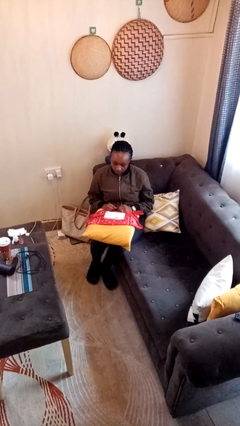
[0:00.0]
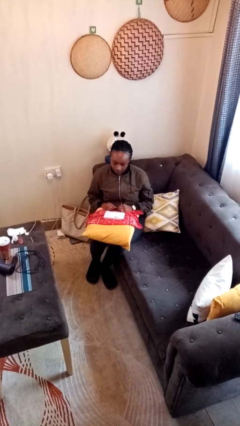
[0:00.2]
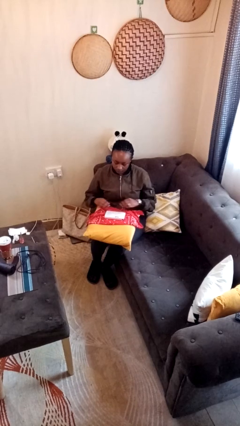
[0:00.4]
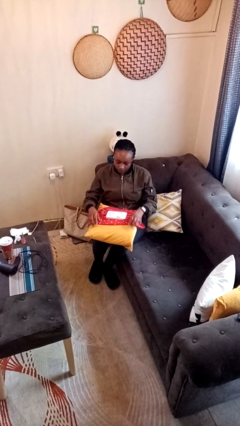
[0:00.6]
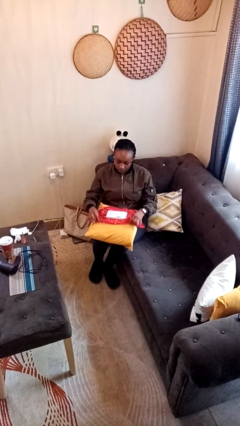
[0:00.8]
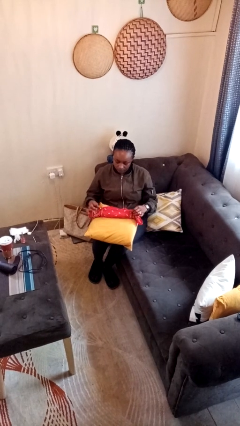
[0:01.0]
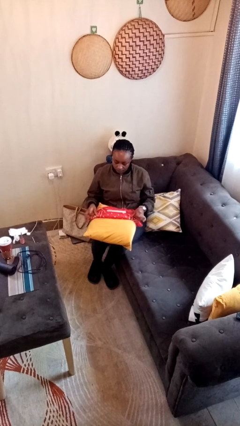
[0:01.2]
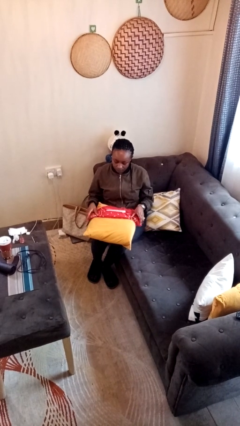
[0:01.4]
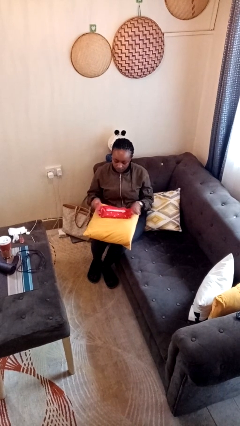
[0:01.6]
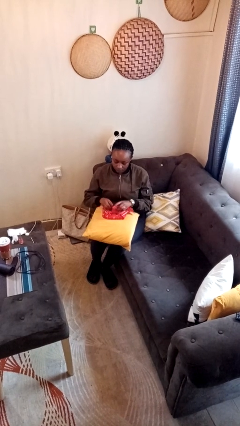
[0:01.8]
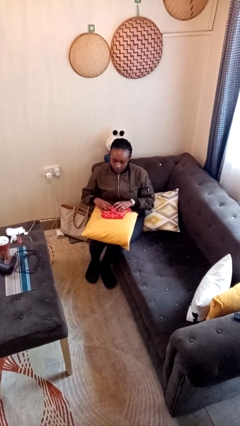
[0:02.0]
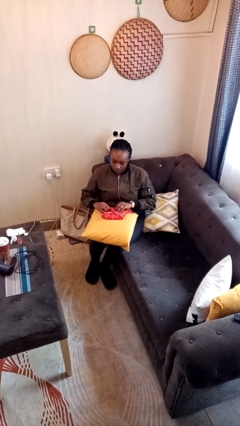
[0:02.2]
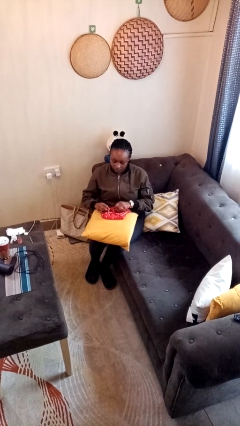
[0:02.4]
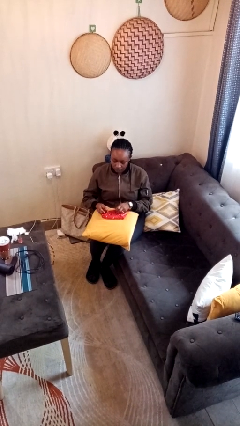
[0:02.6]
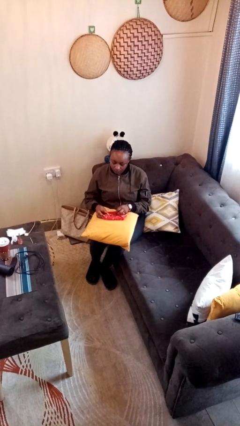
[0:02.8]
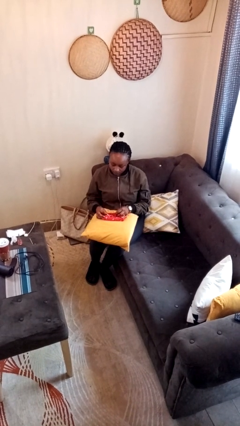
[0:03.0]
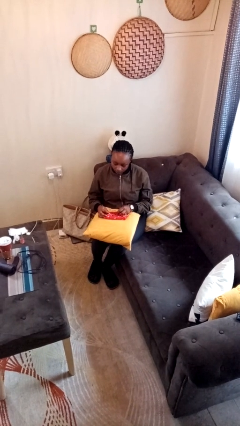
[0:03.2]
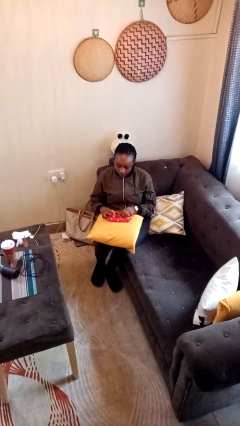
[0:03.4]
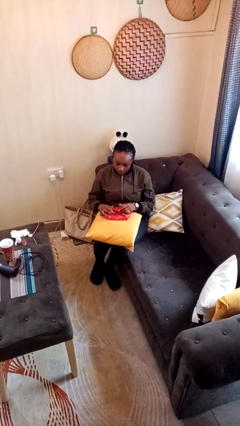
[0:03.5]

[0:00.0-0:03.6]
person wraps box

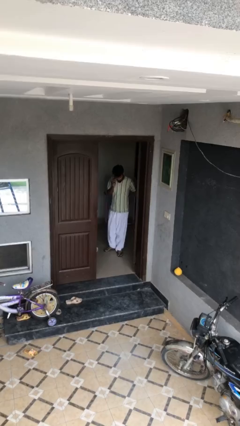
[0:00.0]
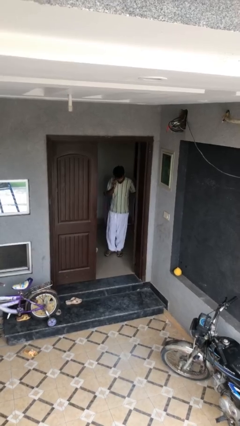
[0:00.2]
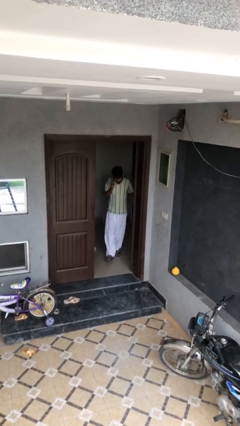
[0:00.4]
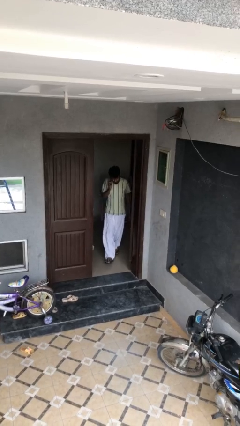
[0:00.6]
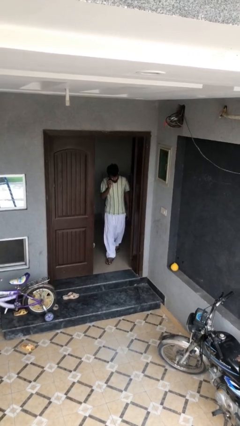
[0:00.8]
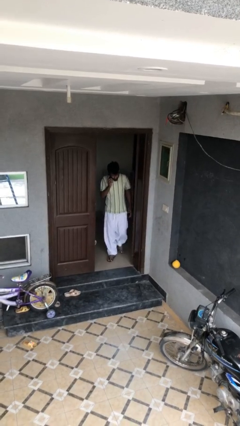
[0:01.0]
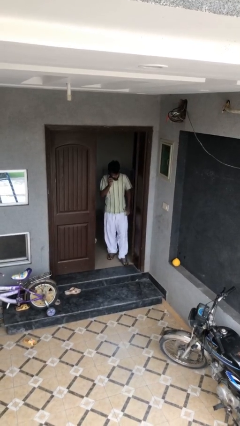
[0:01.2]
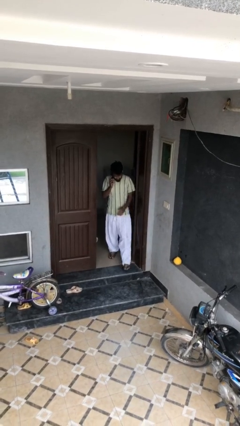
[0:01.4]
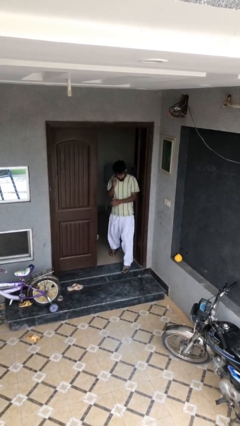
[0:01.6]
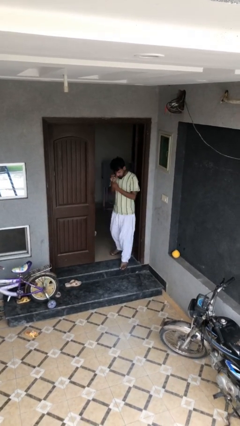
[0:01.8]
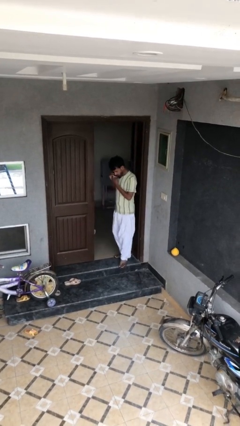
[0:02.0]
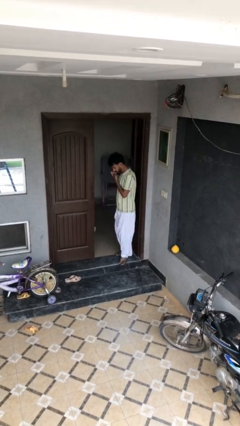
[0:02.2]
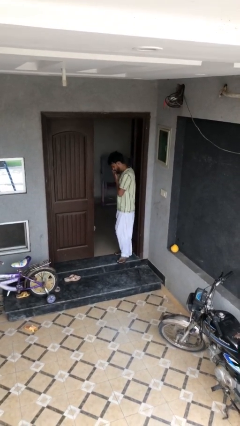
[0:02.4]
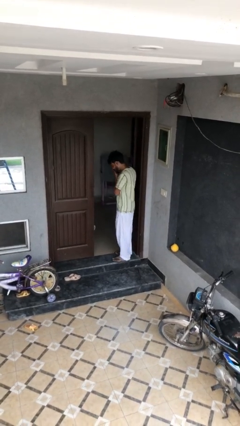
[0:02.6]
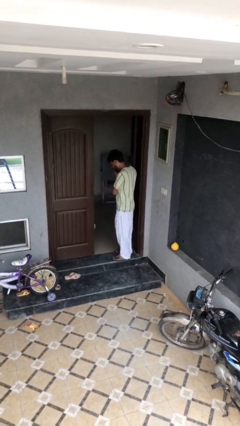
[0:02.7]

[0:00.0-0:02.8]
person enters scene through structure

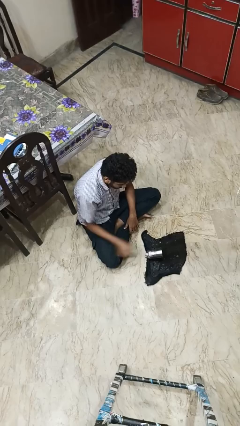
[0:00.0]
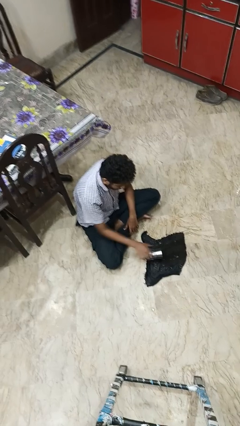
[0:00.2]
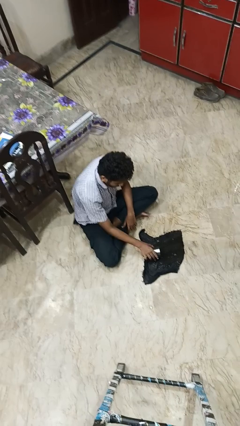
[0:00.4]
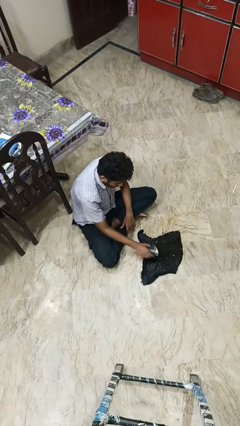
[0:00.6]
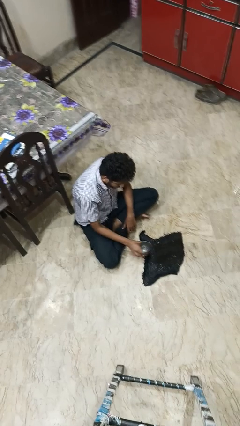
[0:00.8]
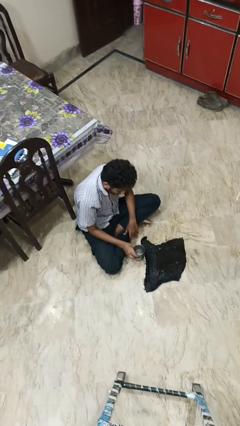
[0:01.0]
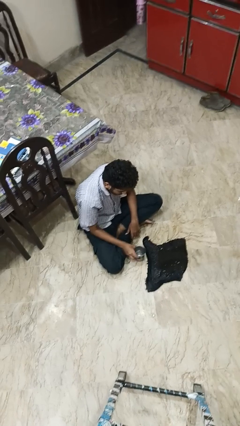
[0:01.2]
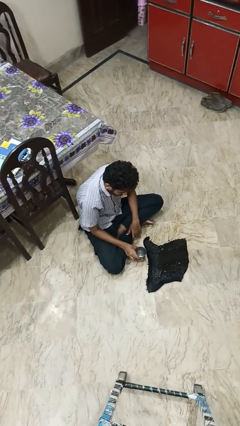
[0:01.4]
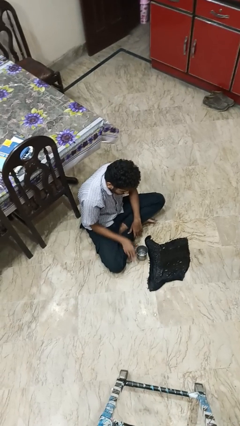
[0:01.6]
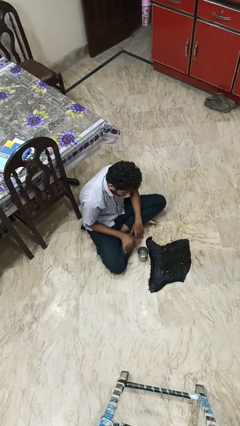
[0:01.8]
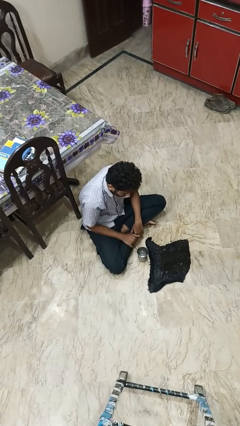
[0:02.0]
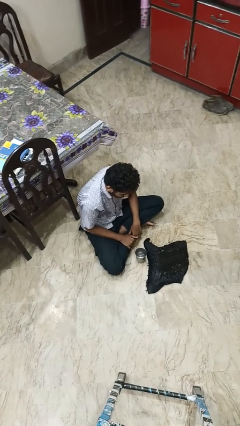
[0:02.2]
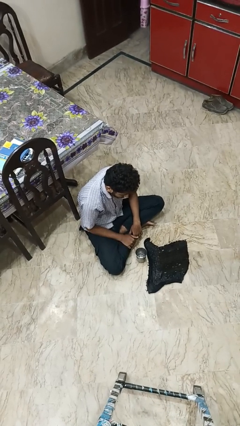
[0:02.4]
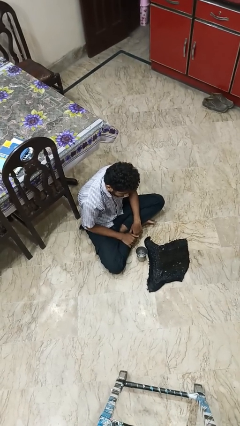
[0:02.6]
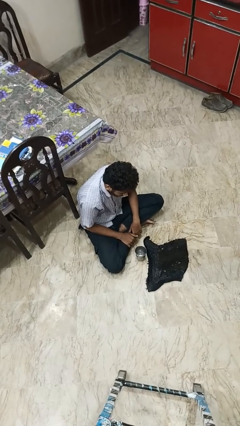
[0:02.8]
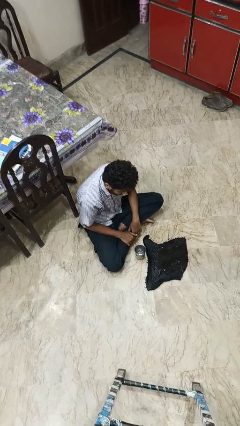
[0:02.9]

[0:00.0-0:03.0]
person sets upright glass

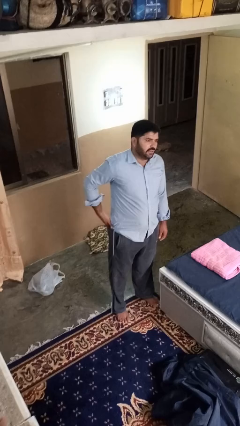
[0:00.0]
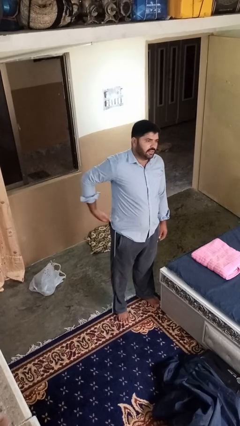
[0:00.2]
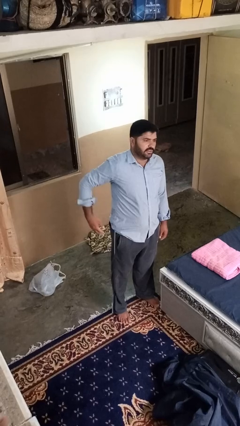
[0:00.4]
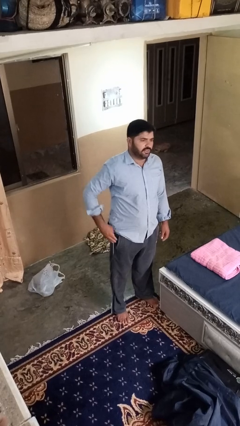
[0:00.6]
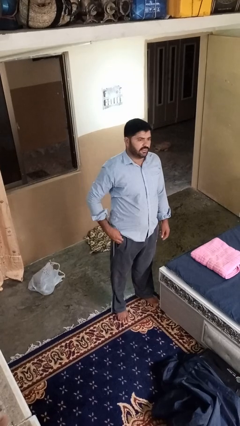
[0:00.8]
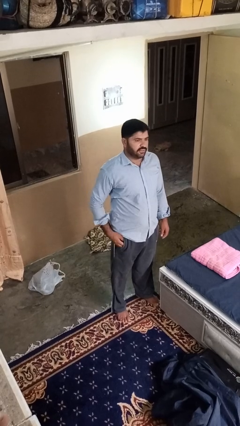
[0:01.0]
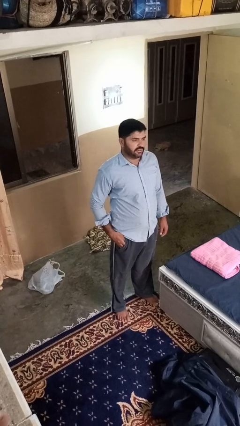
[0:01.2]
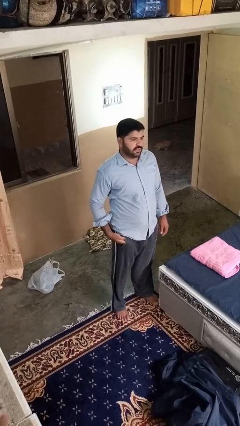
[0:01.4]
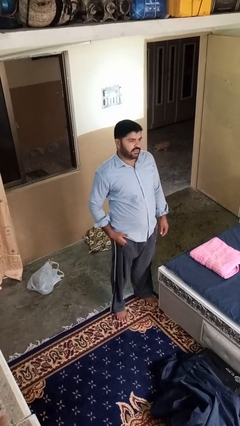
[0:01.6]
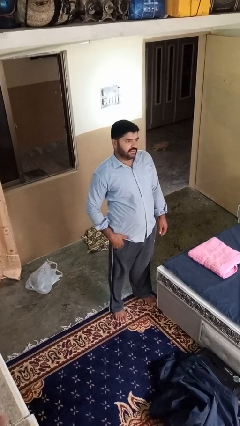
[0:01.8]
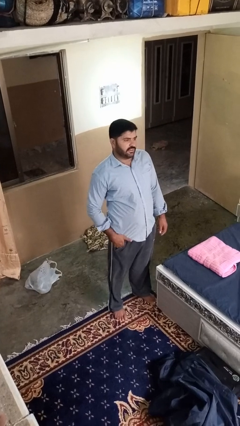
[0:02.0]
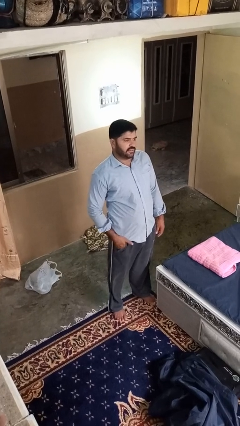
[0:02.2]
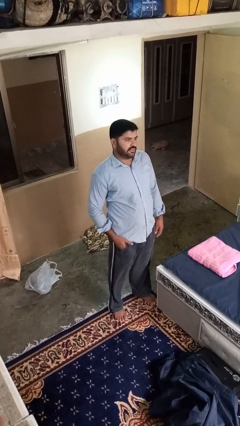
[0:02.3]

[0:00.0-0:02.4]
person puts hands in back pockets

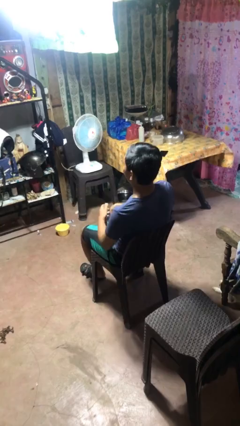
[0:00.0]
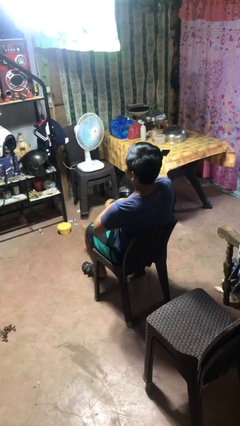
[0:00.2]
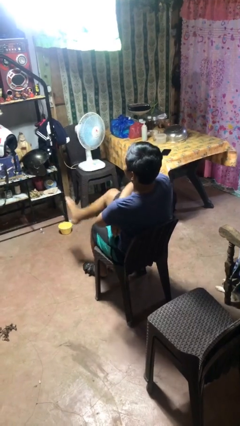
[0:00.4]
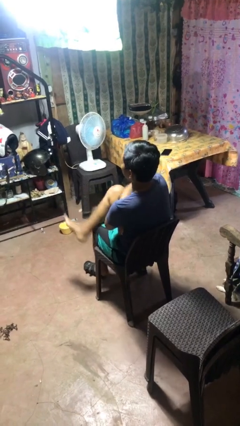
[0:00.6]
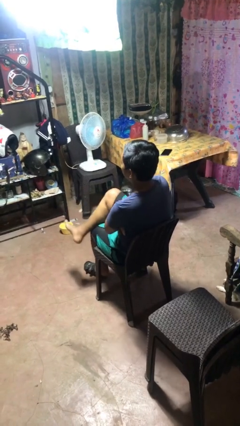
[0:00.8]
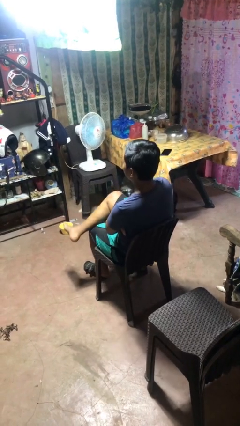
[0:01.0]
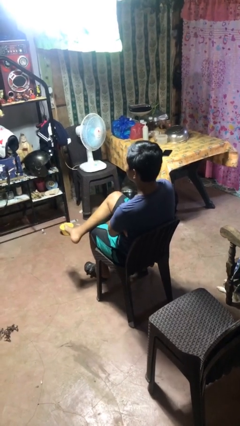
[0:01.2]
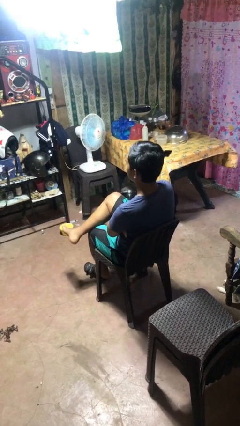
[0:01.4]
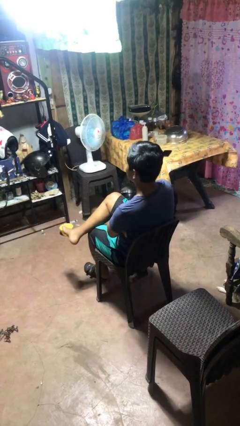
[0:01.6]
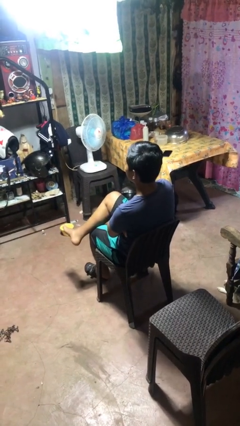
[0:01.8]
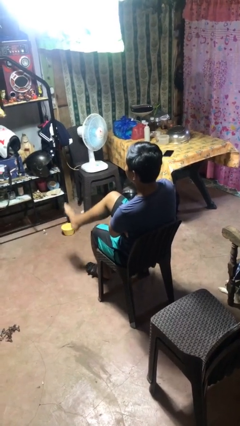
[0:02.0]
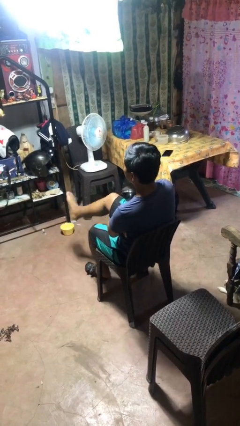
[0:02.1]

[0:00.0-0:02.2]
person crosses legs

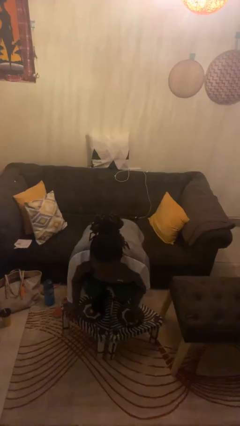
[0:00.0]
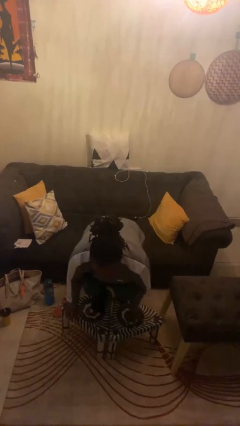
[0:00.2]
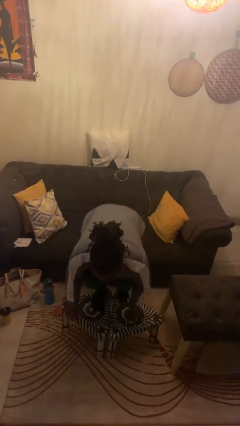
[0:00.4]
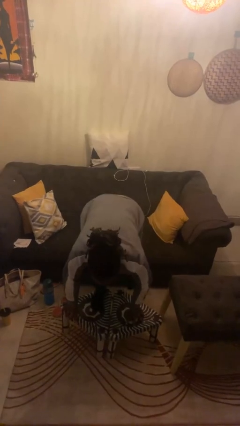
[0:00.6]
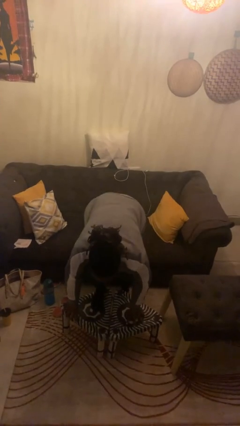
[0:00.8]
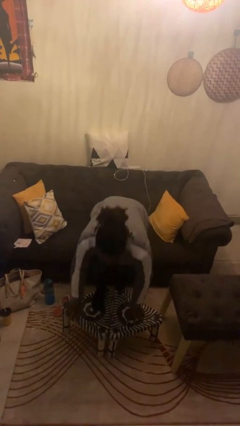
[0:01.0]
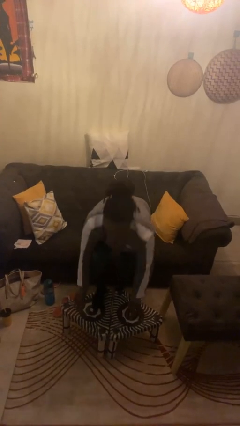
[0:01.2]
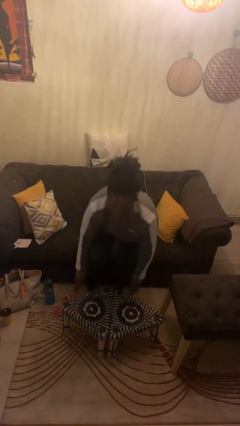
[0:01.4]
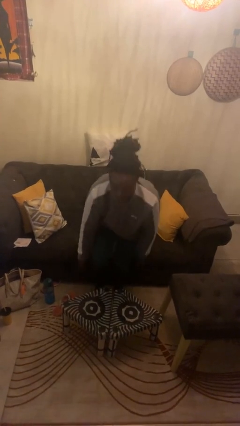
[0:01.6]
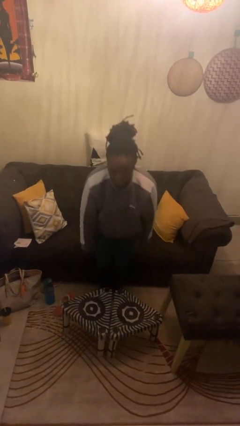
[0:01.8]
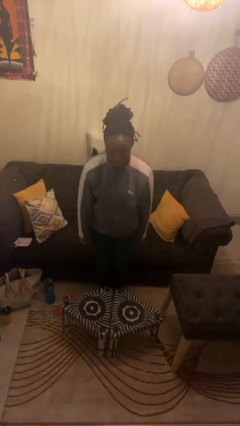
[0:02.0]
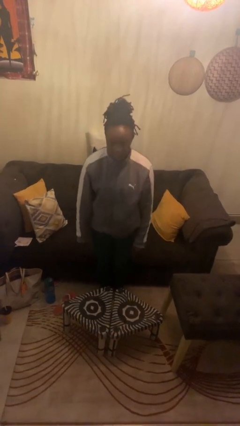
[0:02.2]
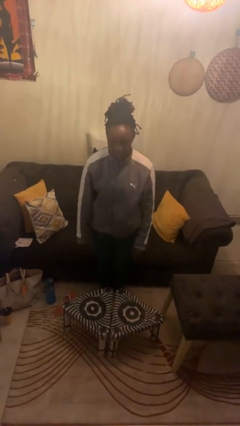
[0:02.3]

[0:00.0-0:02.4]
person climbs off table

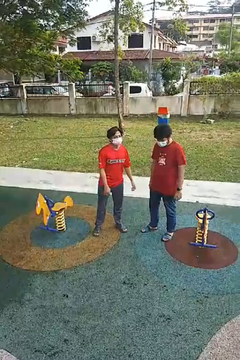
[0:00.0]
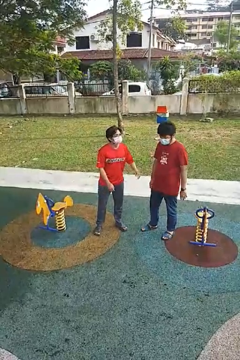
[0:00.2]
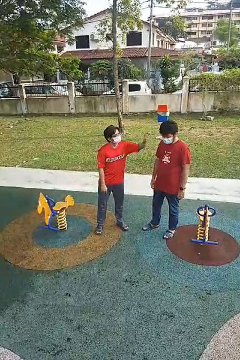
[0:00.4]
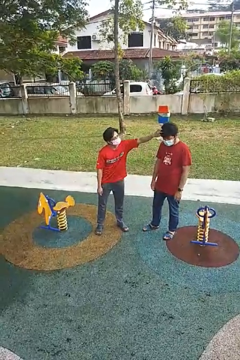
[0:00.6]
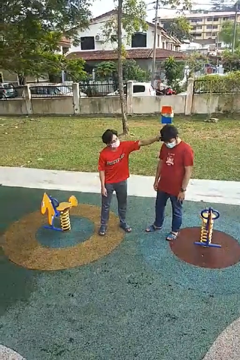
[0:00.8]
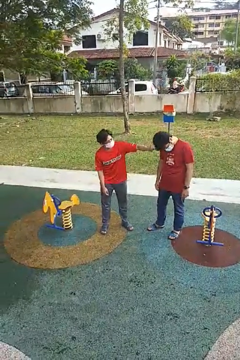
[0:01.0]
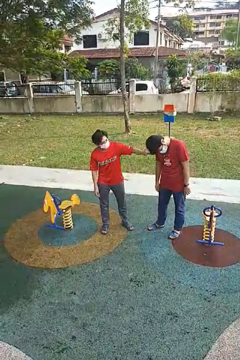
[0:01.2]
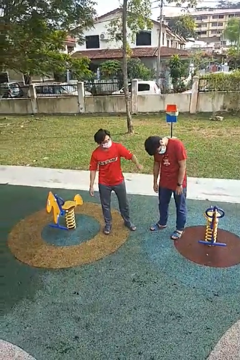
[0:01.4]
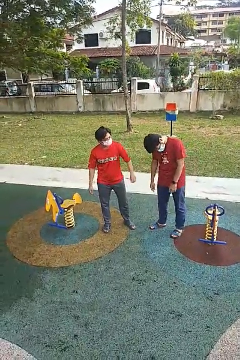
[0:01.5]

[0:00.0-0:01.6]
person grabs person by hair
